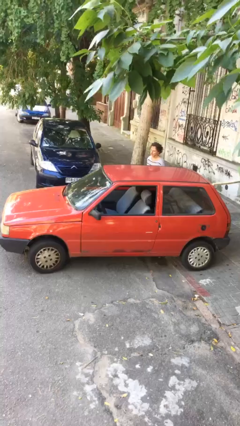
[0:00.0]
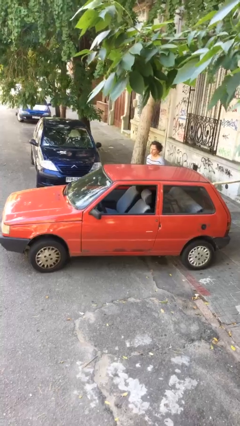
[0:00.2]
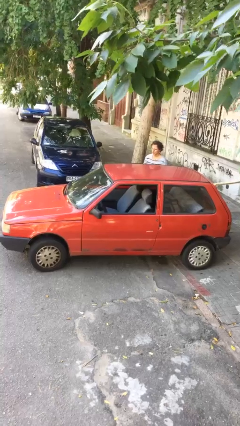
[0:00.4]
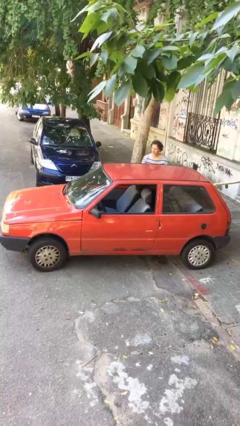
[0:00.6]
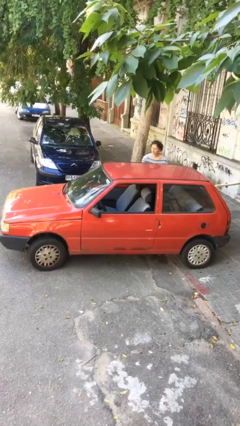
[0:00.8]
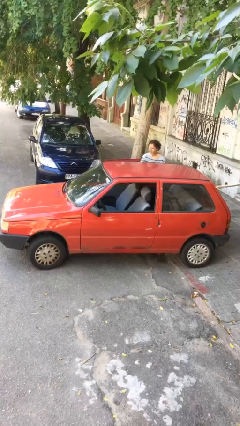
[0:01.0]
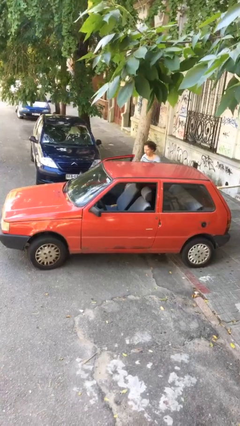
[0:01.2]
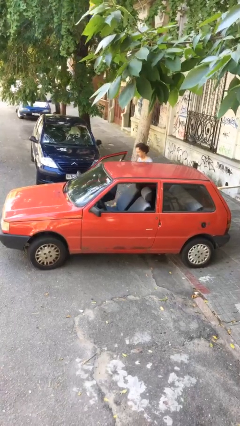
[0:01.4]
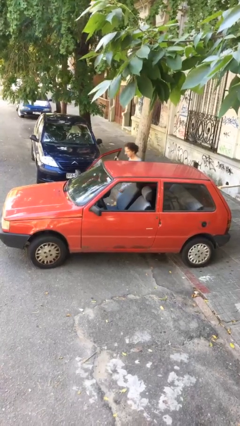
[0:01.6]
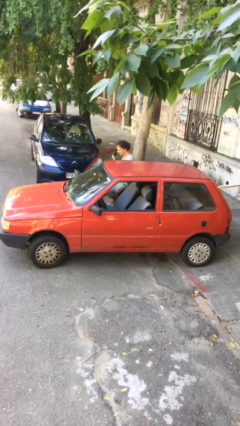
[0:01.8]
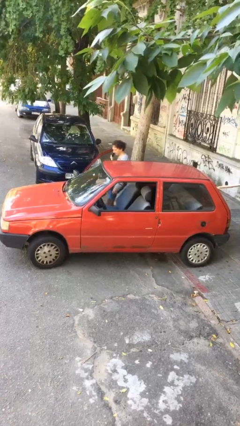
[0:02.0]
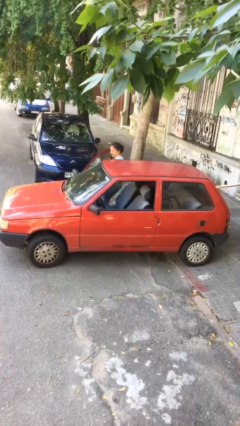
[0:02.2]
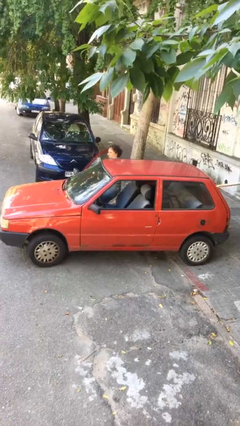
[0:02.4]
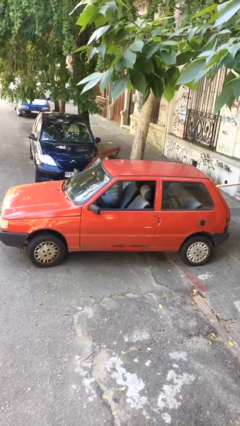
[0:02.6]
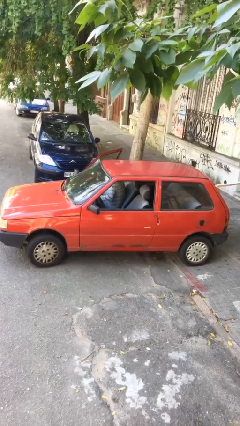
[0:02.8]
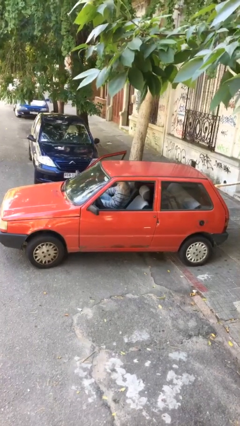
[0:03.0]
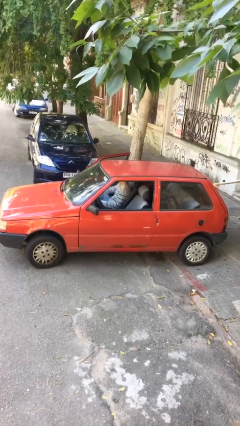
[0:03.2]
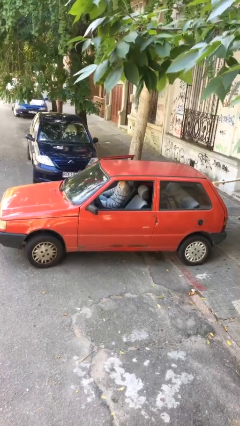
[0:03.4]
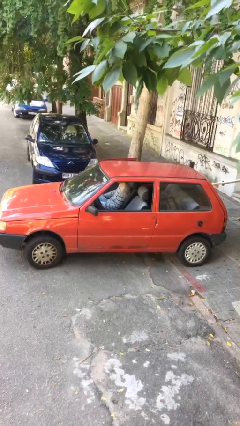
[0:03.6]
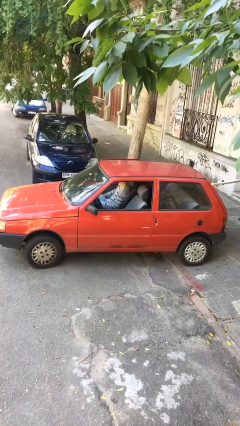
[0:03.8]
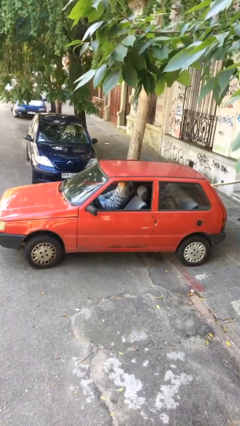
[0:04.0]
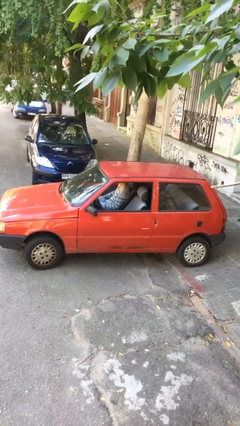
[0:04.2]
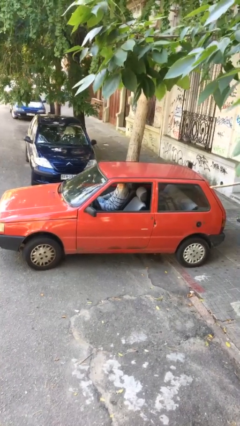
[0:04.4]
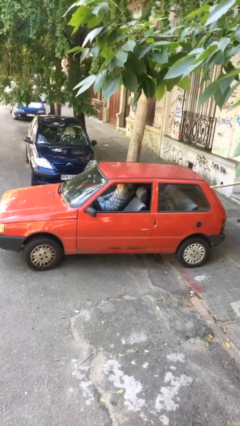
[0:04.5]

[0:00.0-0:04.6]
car picks up person

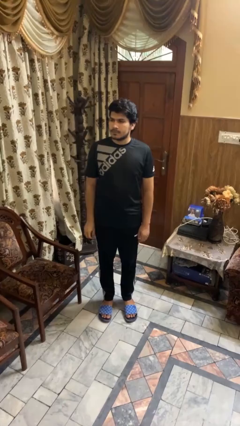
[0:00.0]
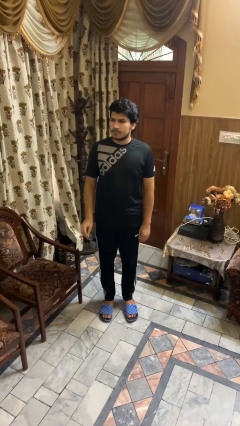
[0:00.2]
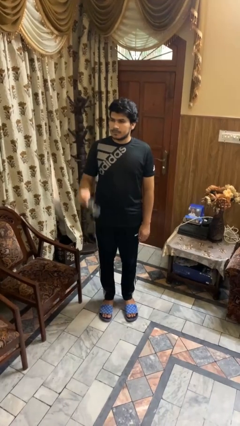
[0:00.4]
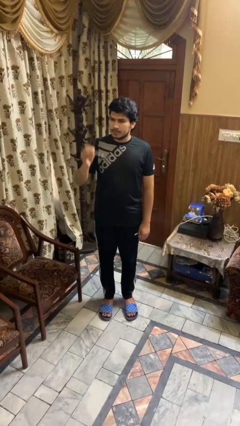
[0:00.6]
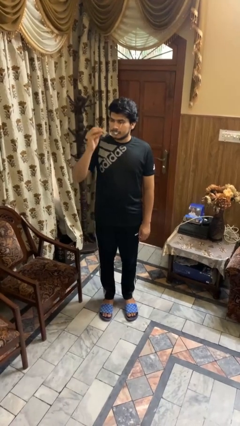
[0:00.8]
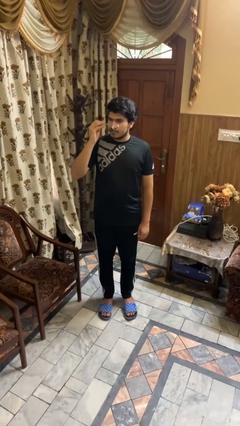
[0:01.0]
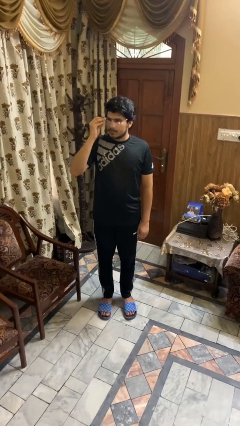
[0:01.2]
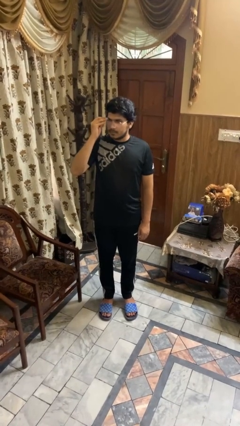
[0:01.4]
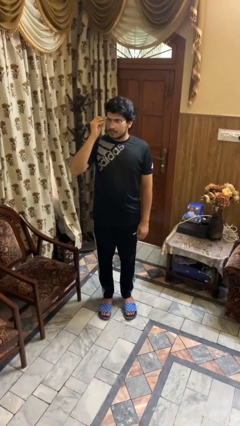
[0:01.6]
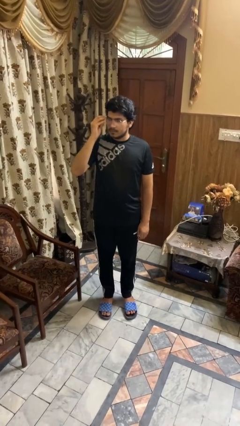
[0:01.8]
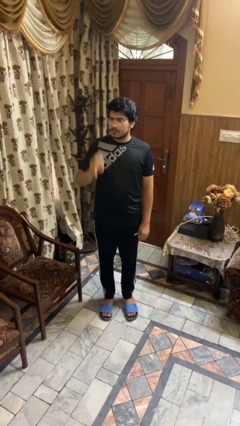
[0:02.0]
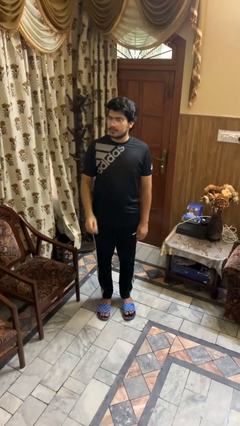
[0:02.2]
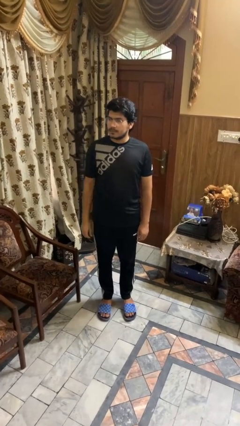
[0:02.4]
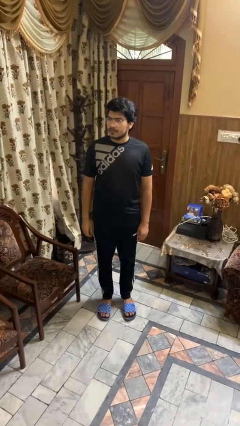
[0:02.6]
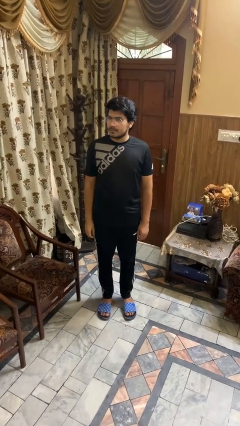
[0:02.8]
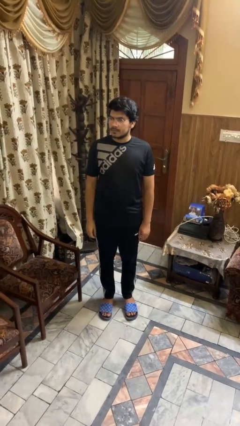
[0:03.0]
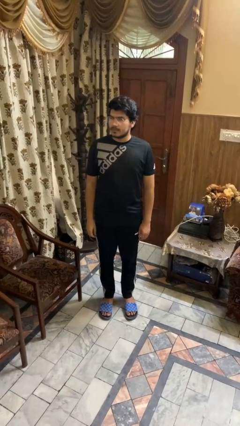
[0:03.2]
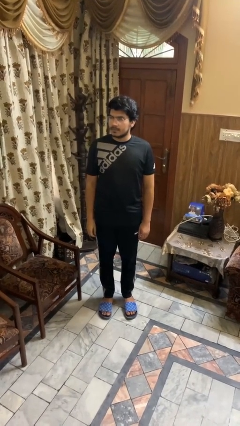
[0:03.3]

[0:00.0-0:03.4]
person puts on glasses

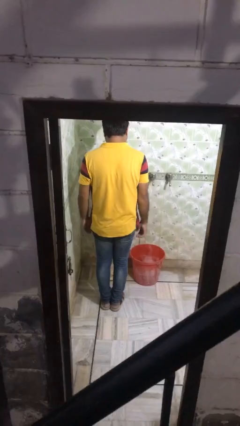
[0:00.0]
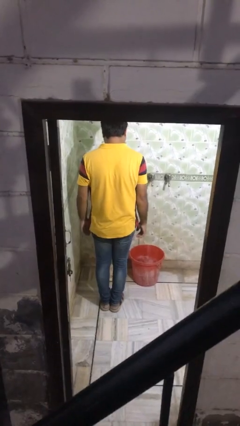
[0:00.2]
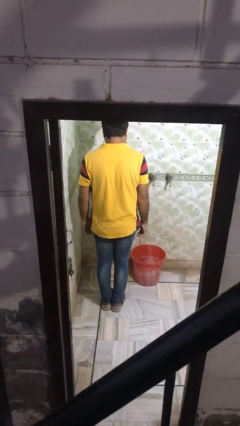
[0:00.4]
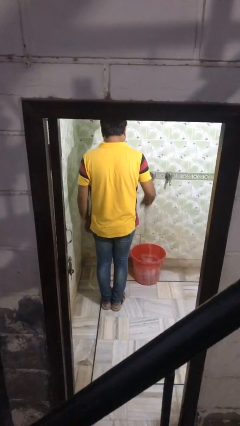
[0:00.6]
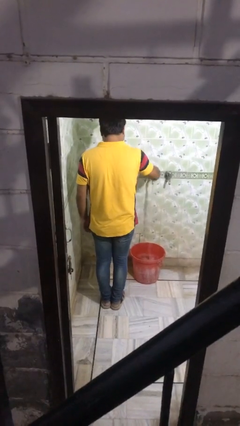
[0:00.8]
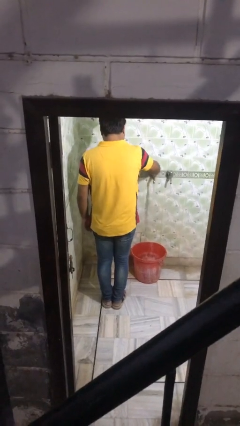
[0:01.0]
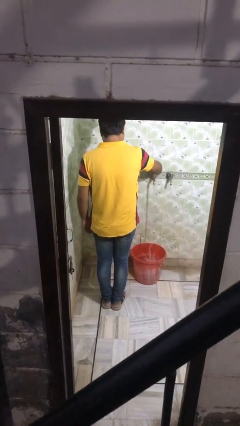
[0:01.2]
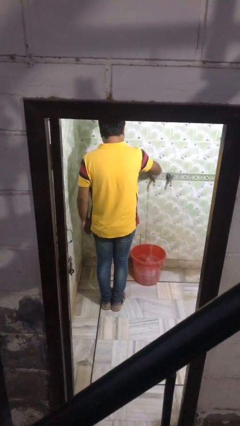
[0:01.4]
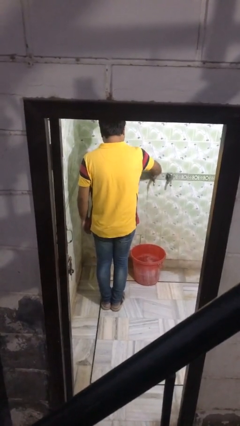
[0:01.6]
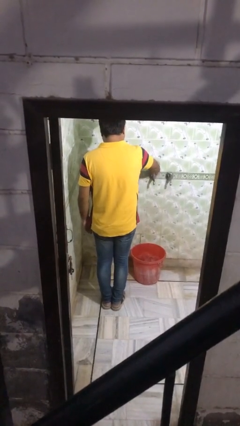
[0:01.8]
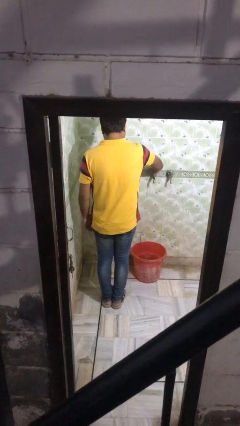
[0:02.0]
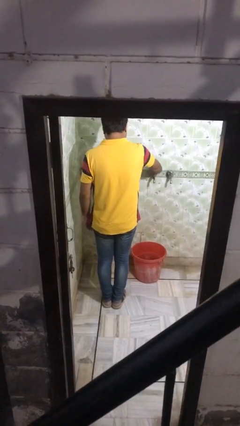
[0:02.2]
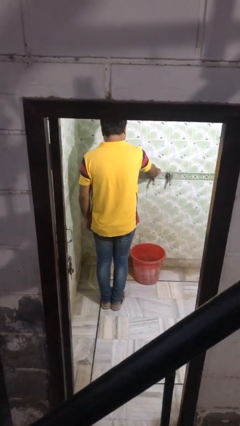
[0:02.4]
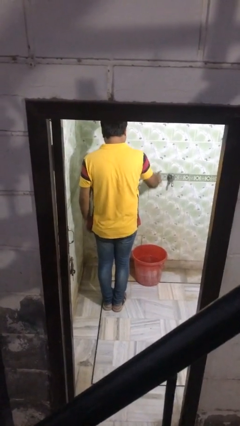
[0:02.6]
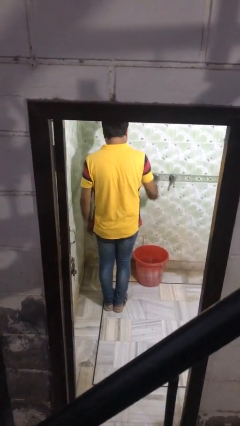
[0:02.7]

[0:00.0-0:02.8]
person turns off faucet

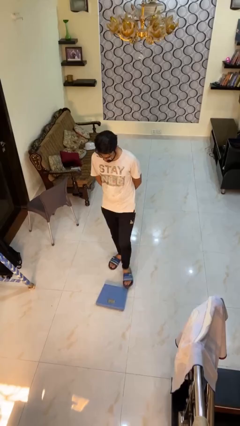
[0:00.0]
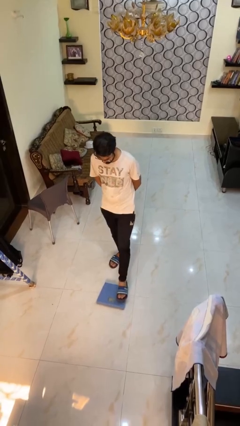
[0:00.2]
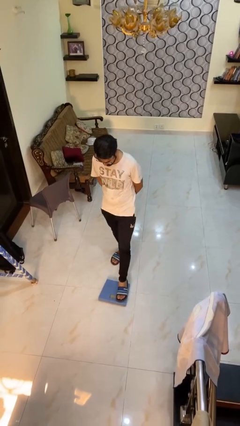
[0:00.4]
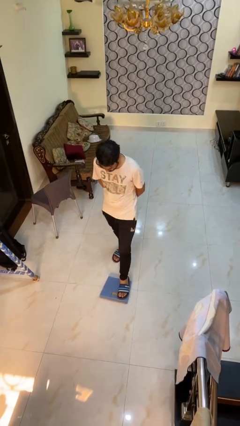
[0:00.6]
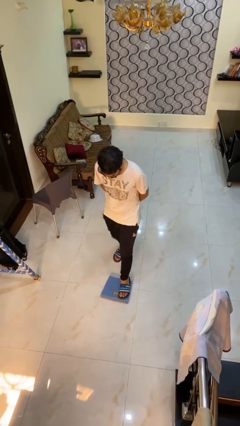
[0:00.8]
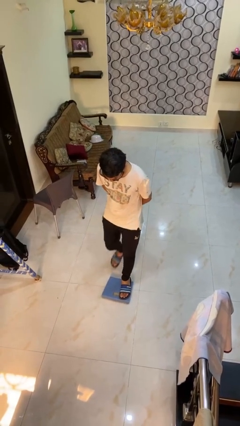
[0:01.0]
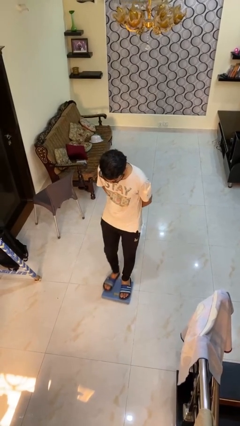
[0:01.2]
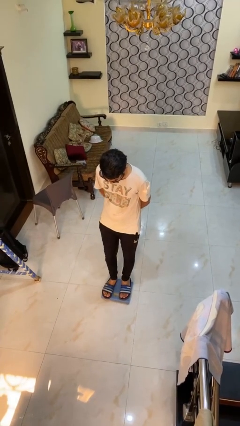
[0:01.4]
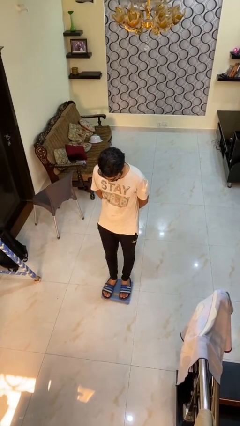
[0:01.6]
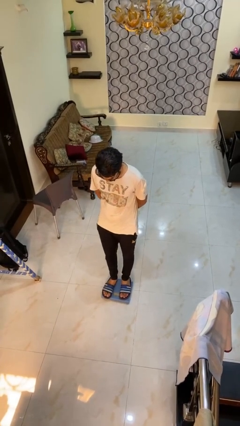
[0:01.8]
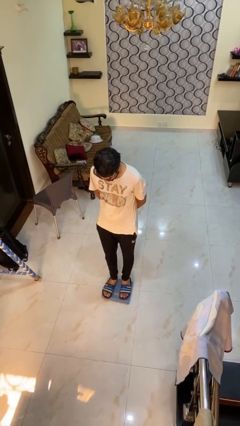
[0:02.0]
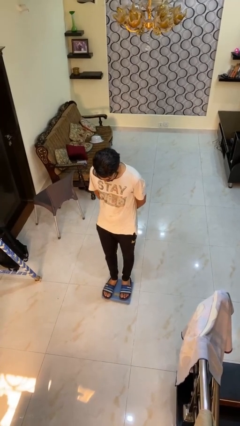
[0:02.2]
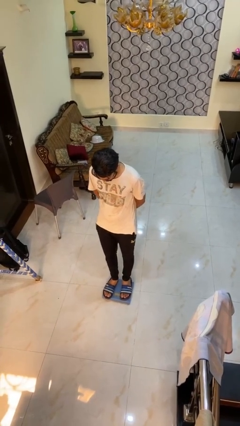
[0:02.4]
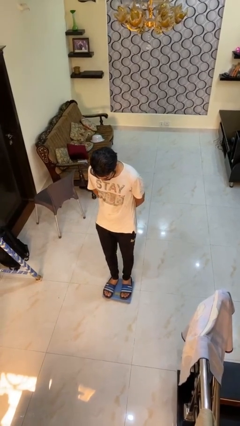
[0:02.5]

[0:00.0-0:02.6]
person uses bodyweight scale

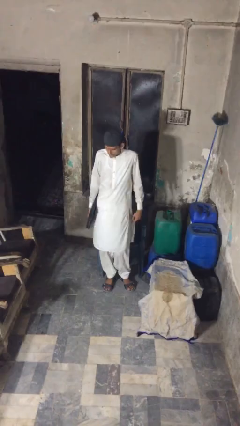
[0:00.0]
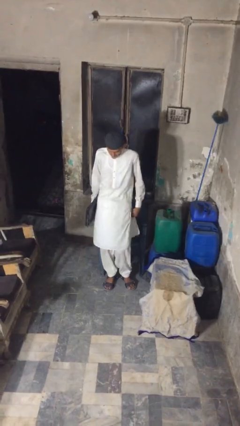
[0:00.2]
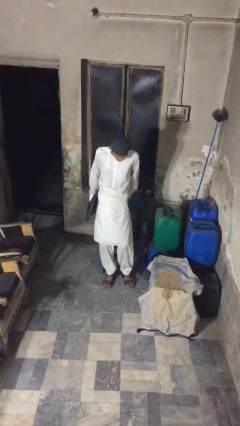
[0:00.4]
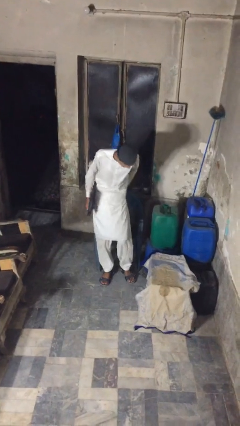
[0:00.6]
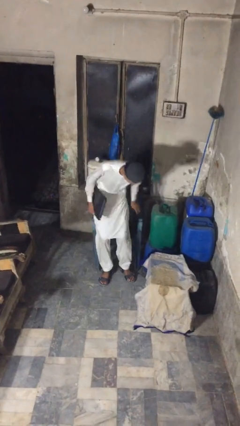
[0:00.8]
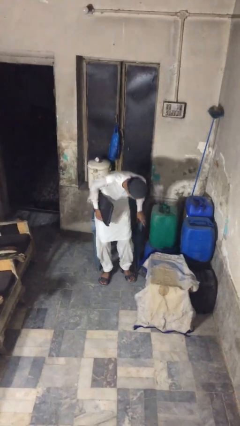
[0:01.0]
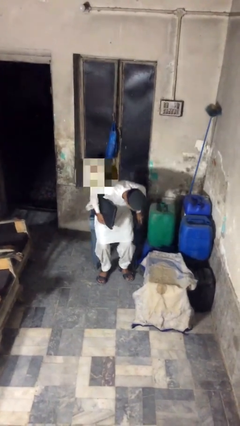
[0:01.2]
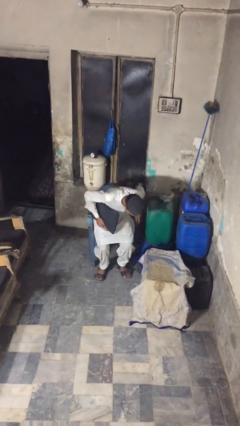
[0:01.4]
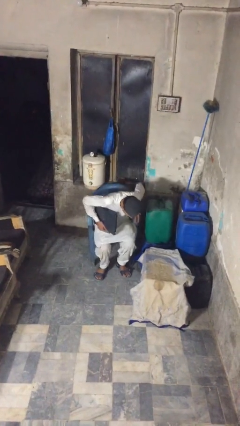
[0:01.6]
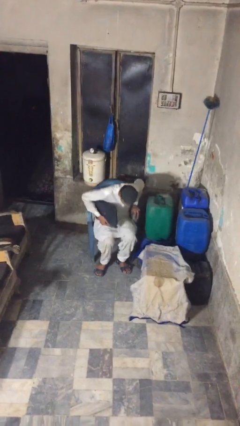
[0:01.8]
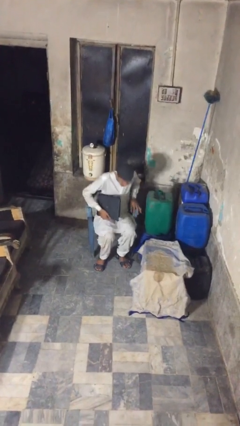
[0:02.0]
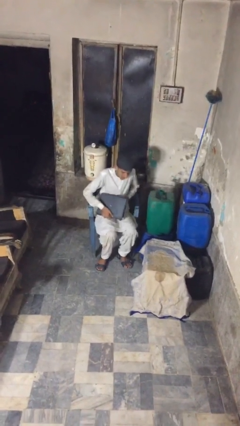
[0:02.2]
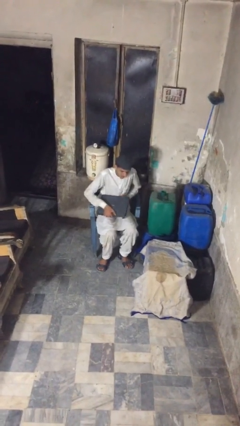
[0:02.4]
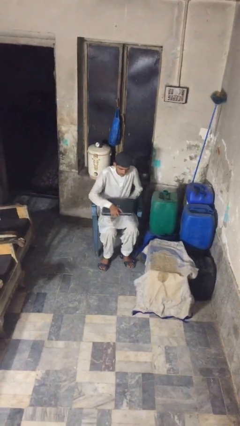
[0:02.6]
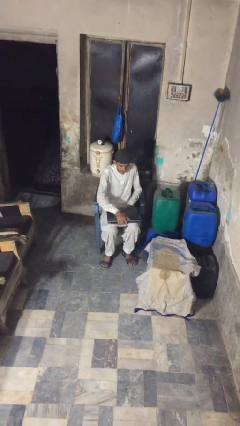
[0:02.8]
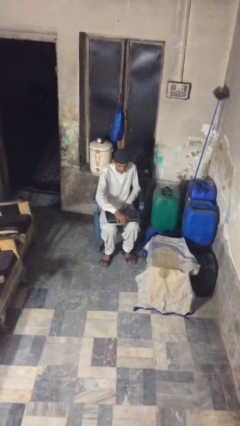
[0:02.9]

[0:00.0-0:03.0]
person sits down

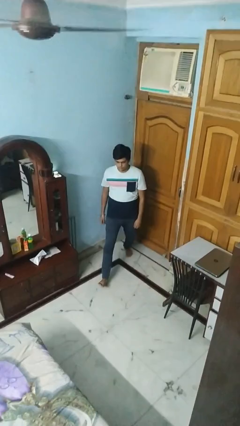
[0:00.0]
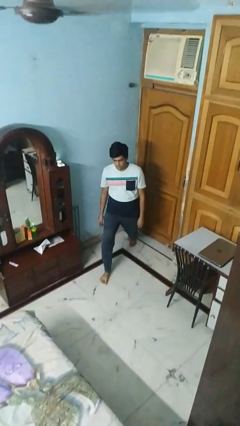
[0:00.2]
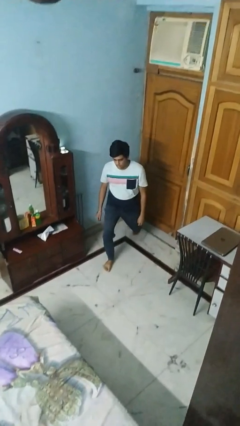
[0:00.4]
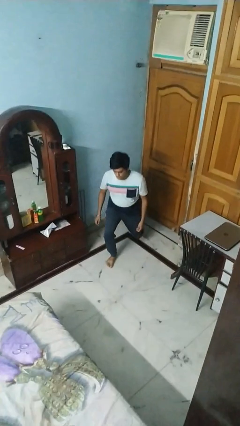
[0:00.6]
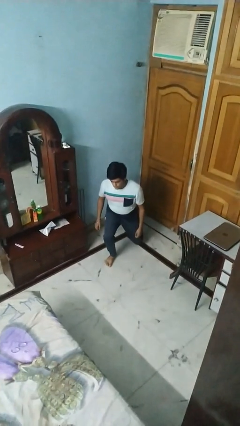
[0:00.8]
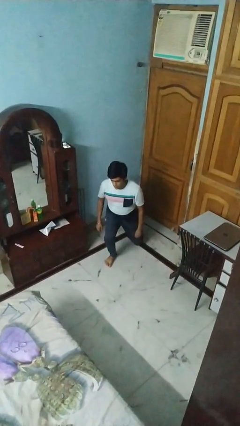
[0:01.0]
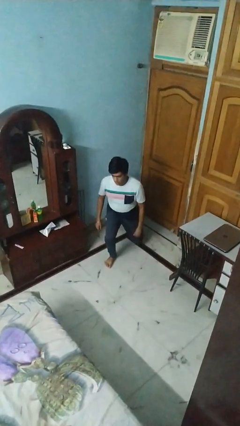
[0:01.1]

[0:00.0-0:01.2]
person exercises with lunges
